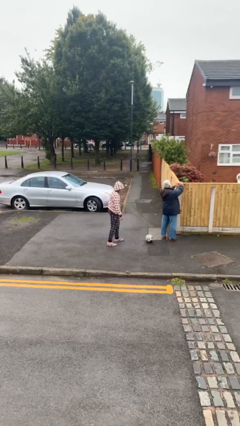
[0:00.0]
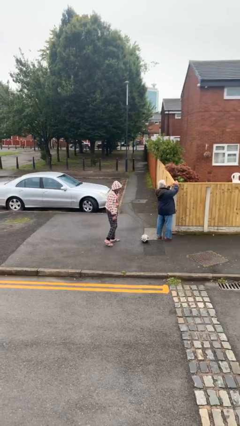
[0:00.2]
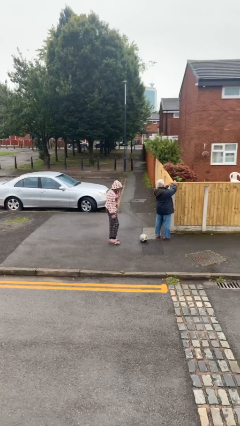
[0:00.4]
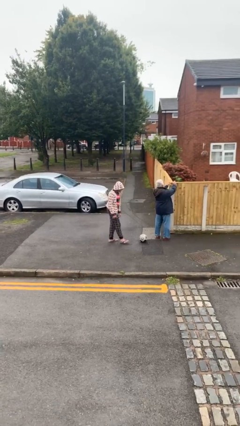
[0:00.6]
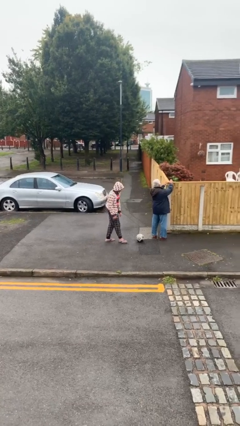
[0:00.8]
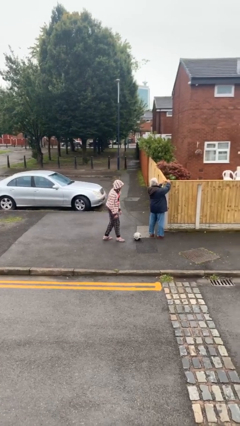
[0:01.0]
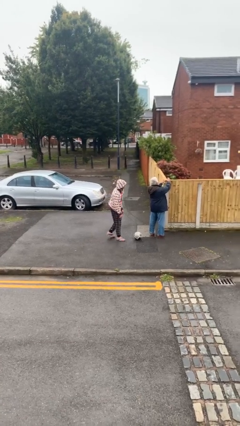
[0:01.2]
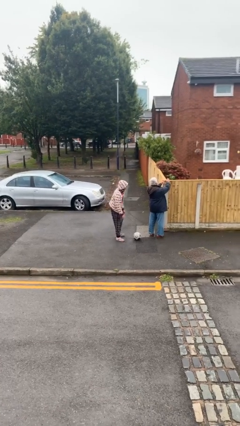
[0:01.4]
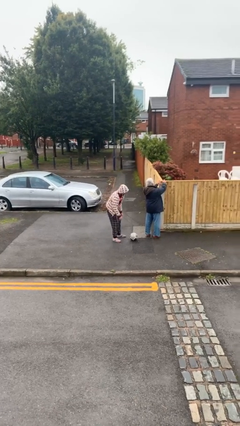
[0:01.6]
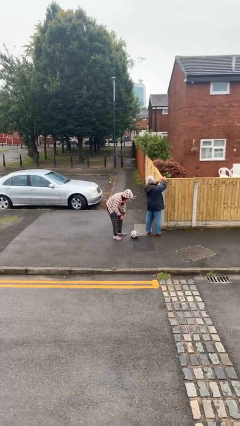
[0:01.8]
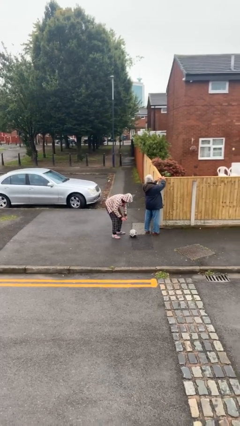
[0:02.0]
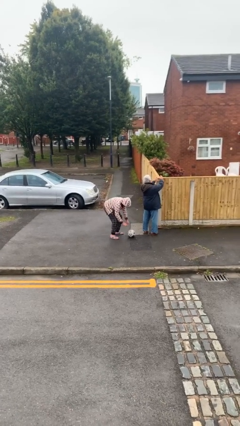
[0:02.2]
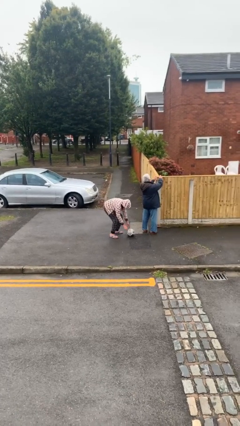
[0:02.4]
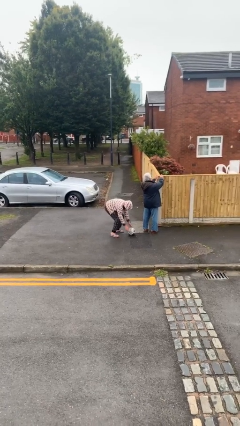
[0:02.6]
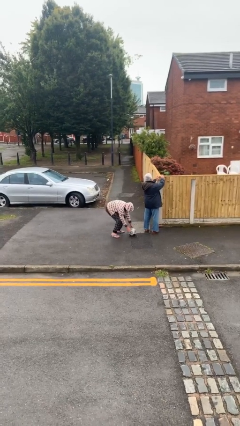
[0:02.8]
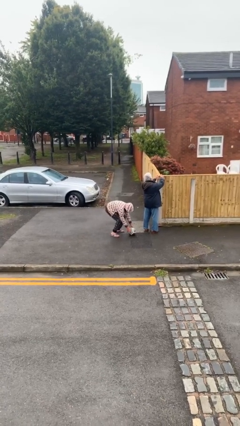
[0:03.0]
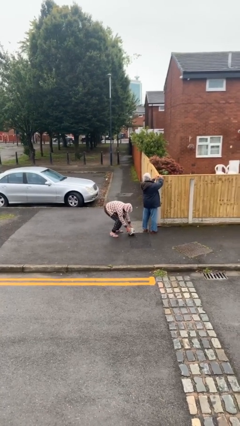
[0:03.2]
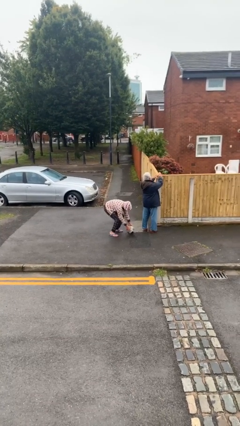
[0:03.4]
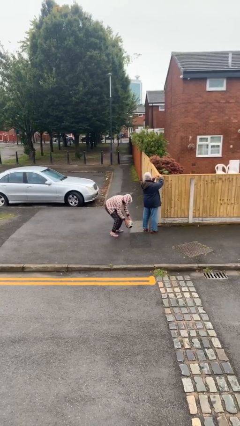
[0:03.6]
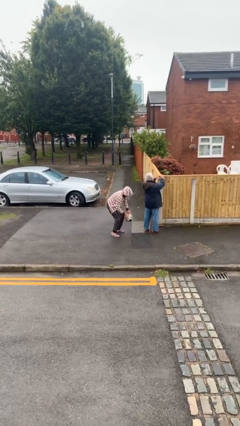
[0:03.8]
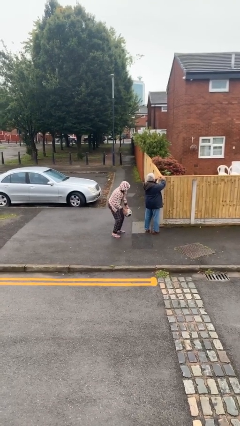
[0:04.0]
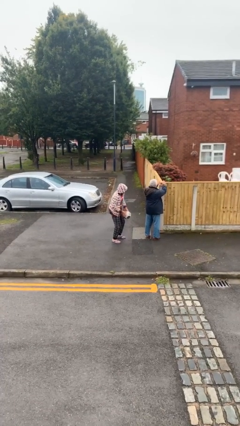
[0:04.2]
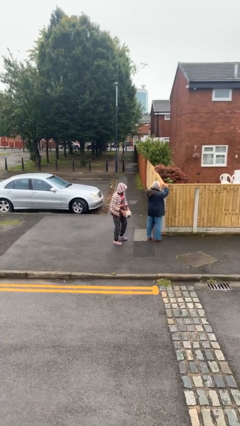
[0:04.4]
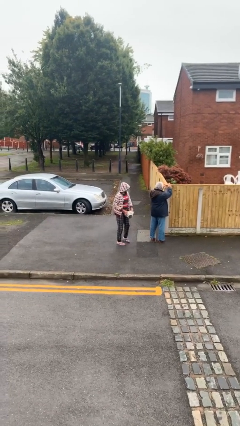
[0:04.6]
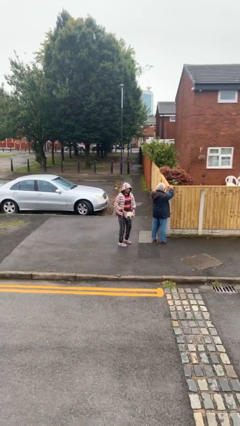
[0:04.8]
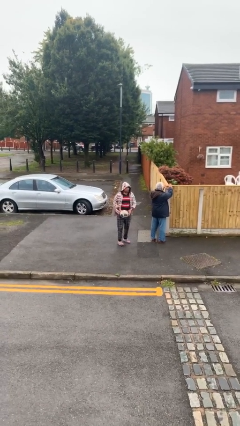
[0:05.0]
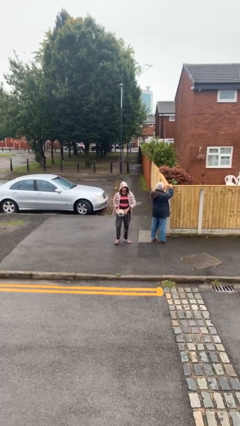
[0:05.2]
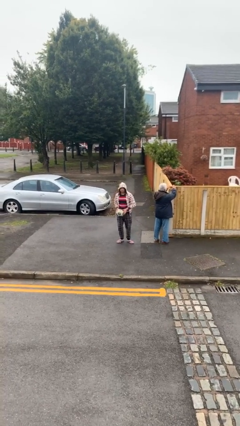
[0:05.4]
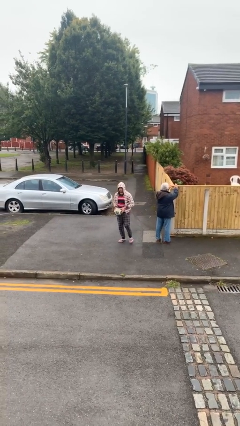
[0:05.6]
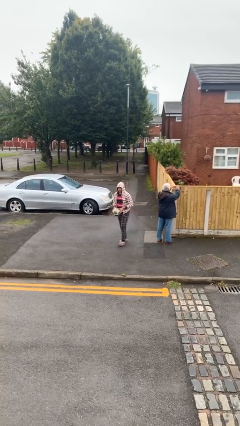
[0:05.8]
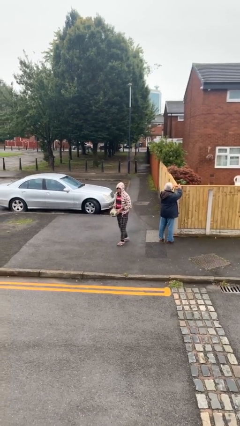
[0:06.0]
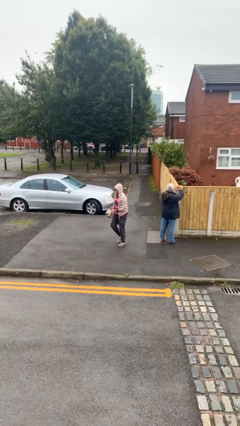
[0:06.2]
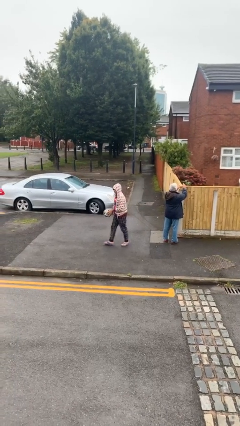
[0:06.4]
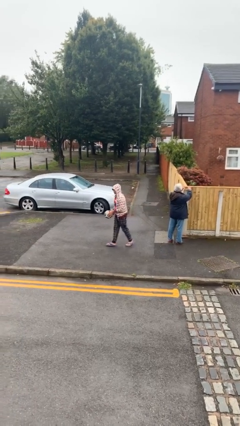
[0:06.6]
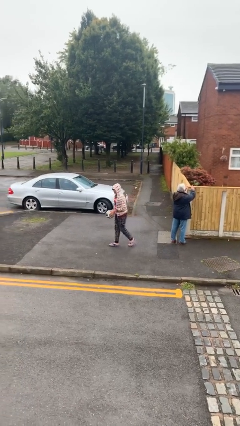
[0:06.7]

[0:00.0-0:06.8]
person steals object from person

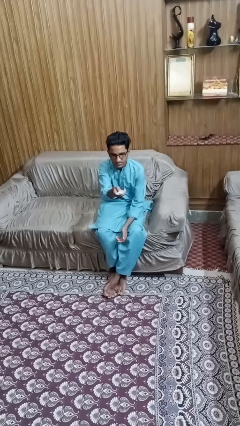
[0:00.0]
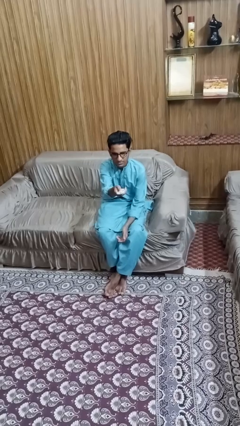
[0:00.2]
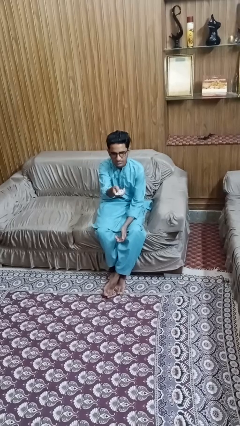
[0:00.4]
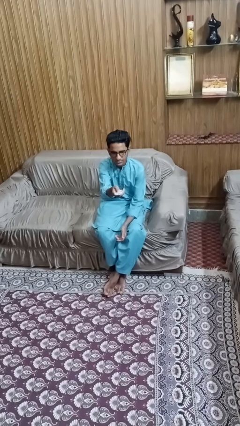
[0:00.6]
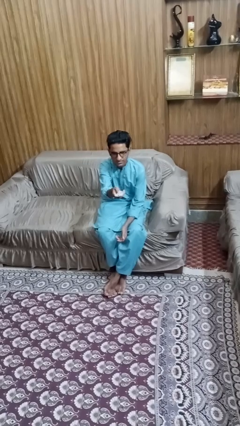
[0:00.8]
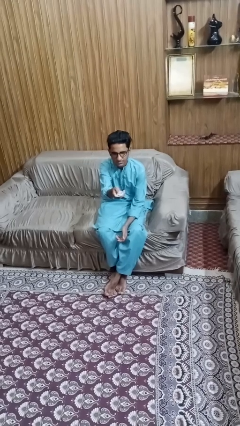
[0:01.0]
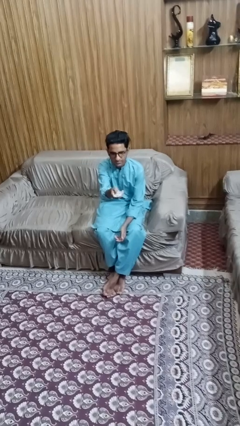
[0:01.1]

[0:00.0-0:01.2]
person uses television remote

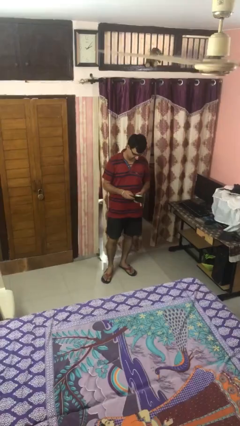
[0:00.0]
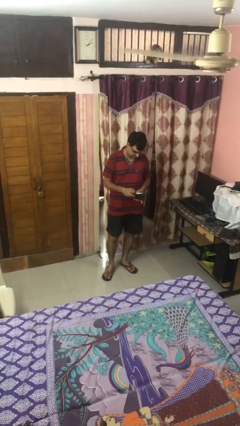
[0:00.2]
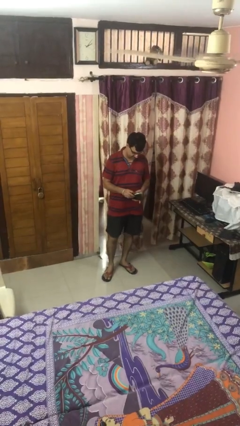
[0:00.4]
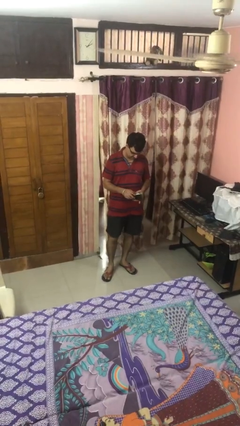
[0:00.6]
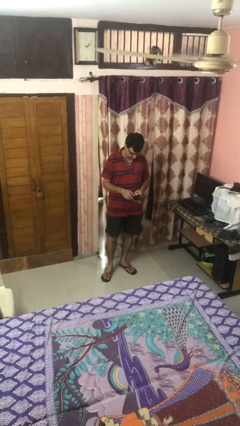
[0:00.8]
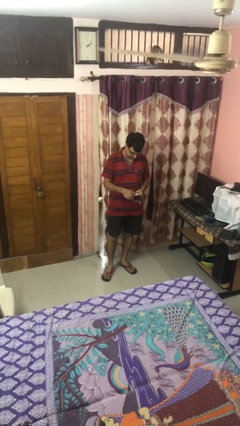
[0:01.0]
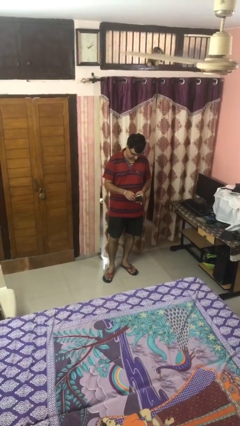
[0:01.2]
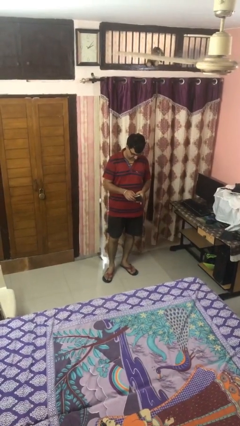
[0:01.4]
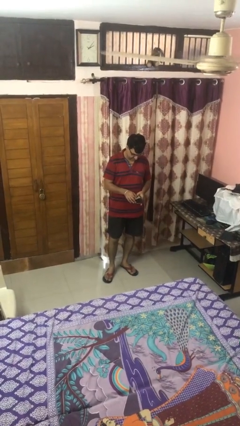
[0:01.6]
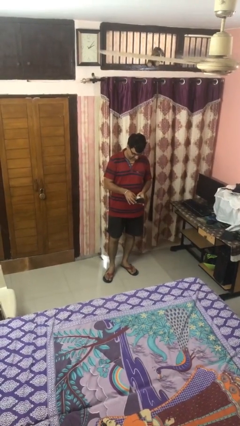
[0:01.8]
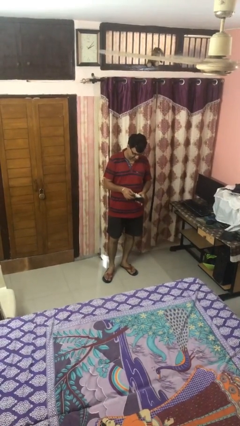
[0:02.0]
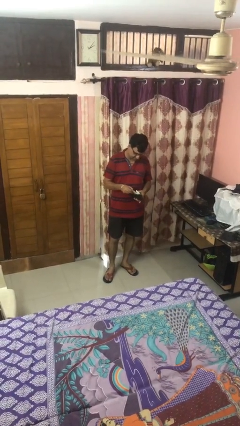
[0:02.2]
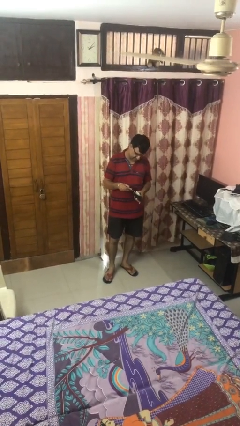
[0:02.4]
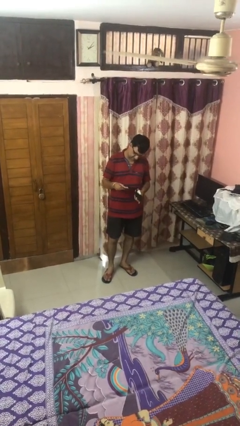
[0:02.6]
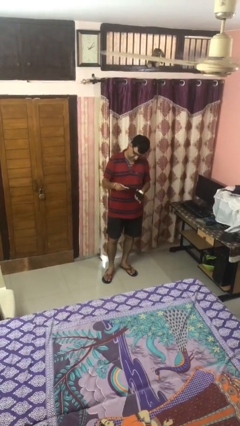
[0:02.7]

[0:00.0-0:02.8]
person takes object from purse

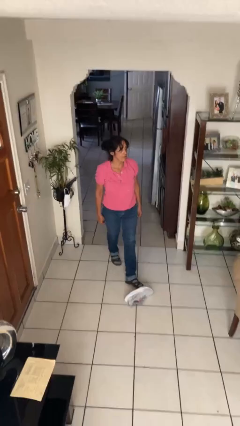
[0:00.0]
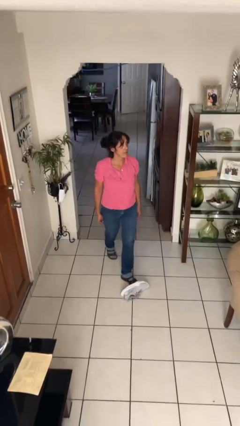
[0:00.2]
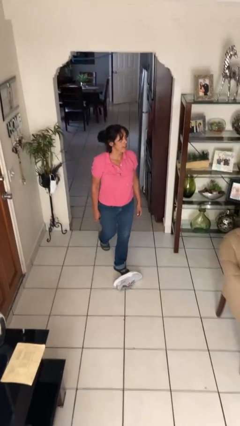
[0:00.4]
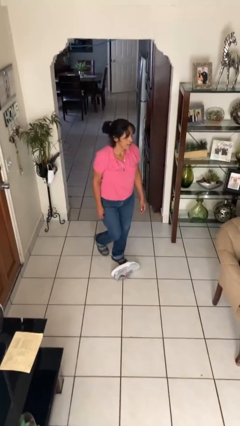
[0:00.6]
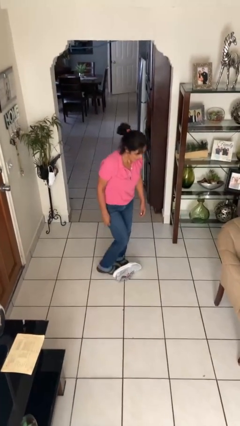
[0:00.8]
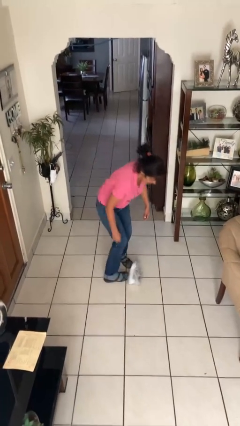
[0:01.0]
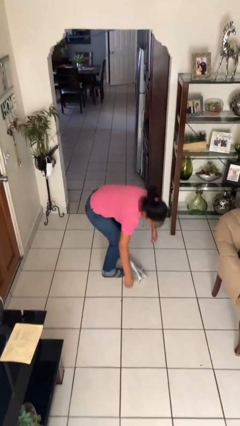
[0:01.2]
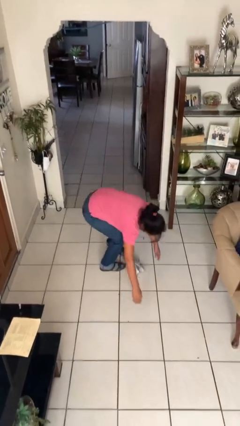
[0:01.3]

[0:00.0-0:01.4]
person trips on object on floor

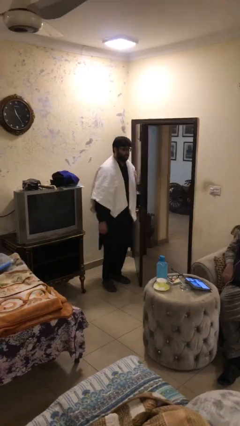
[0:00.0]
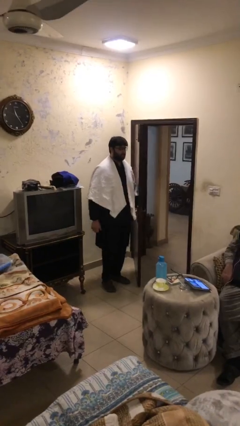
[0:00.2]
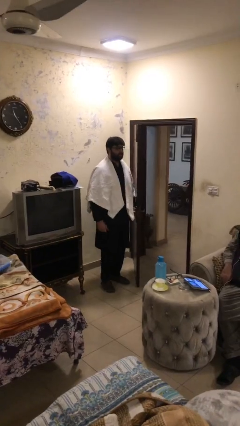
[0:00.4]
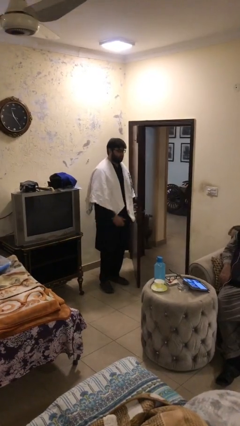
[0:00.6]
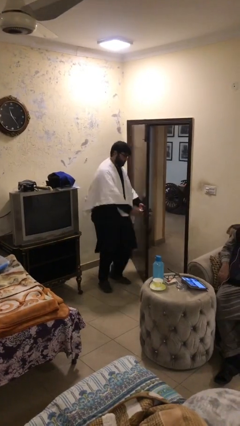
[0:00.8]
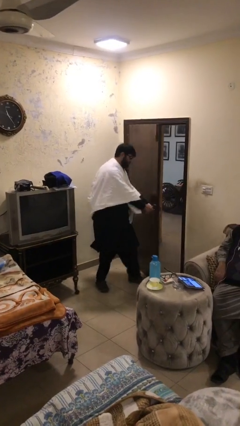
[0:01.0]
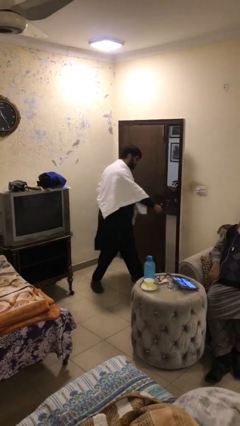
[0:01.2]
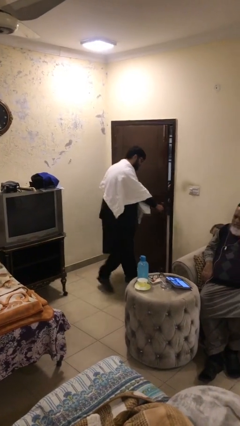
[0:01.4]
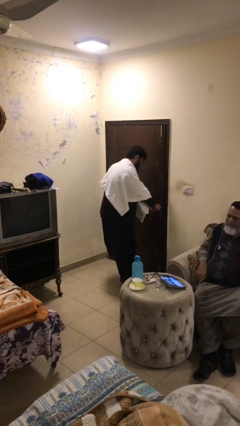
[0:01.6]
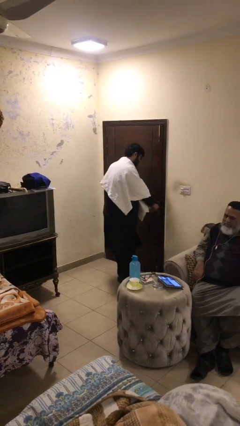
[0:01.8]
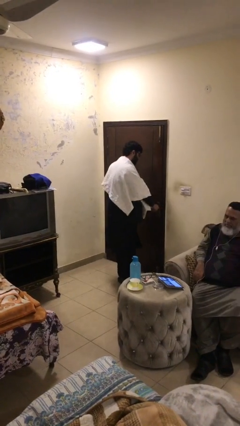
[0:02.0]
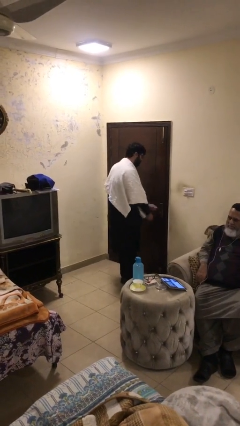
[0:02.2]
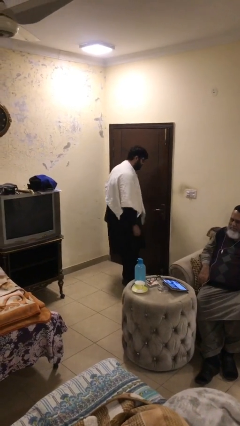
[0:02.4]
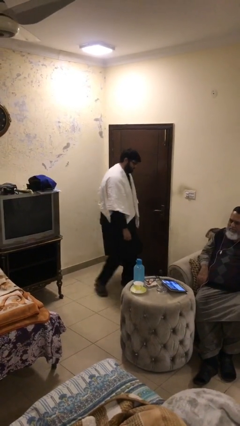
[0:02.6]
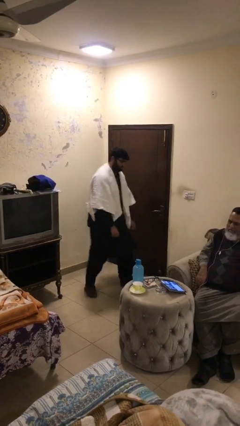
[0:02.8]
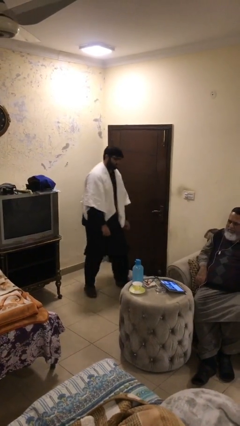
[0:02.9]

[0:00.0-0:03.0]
person closes facility door

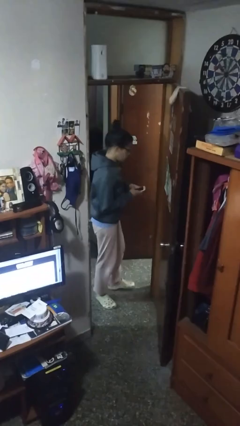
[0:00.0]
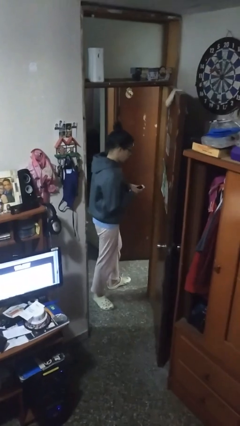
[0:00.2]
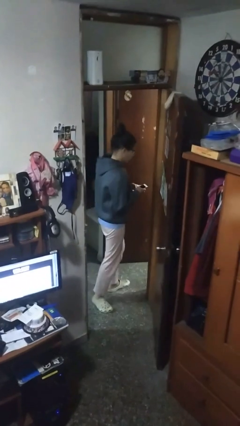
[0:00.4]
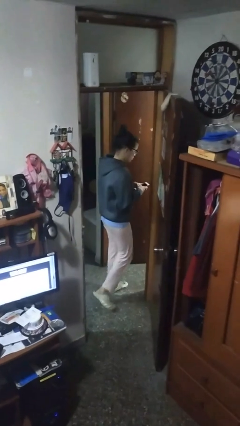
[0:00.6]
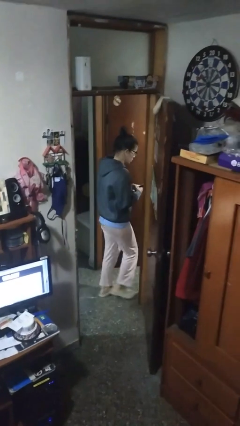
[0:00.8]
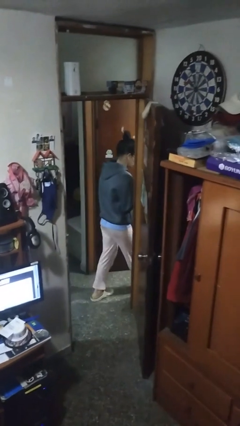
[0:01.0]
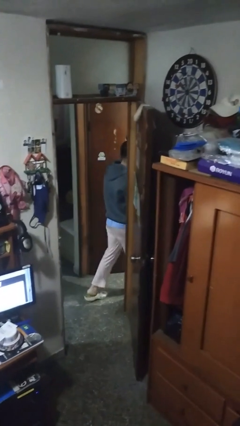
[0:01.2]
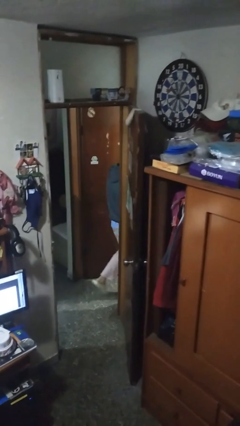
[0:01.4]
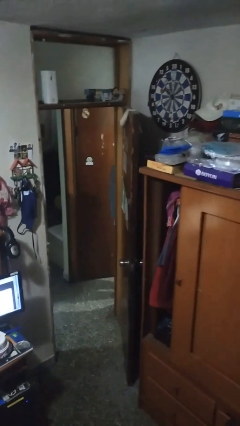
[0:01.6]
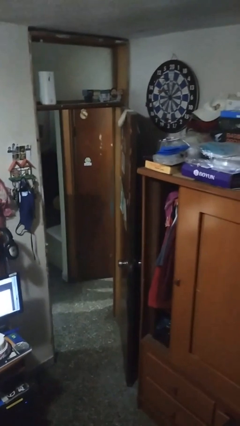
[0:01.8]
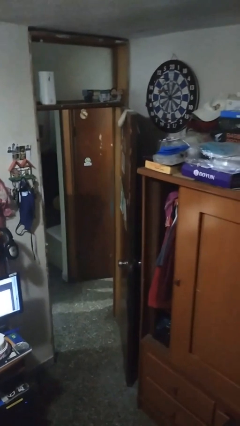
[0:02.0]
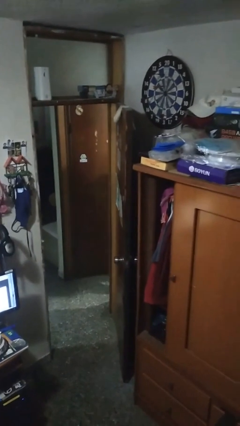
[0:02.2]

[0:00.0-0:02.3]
person exits scene through structure

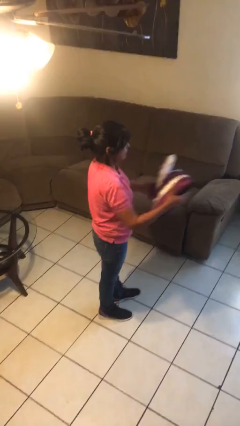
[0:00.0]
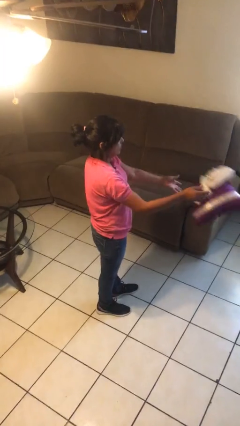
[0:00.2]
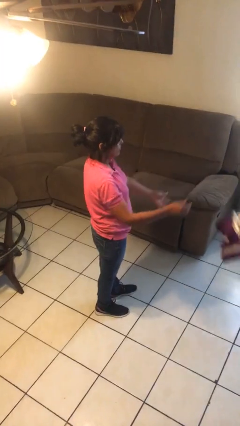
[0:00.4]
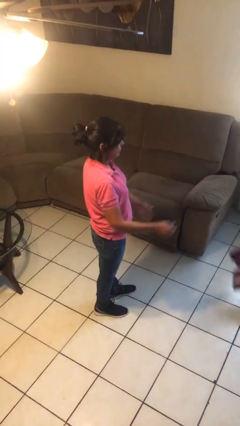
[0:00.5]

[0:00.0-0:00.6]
person throws object to ground
